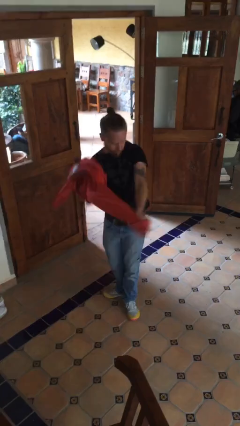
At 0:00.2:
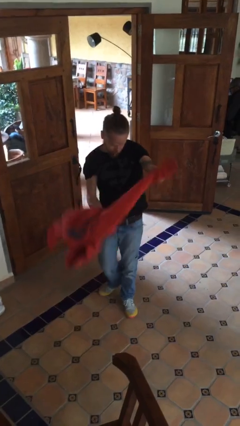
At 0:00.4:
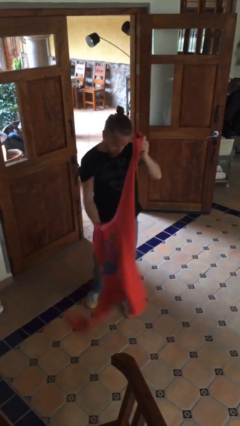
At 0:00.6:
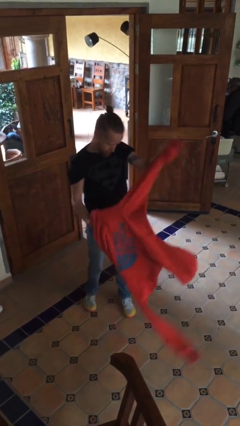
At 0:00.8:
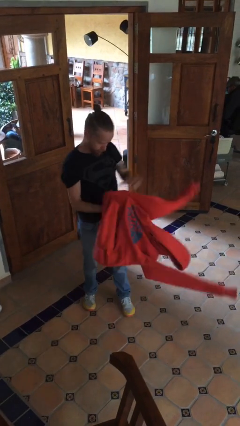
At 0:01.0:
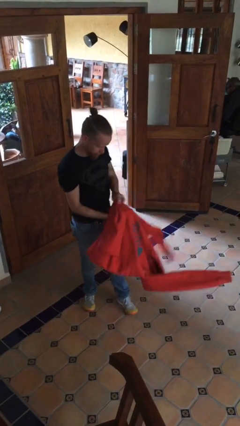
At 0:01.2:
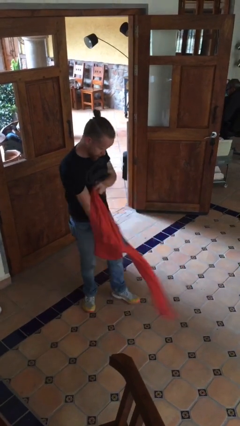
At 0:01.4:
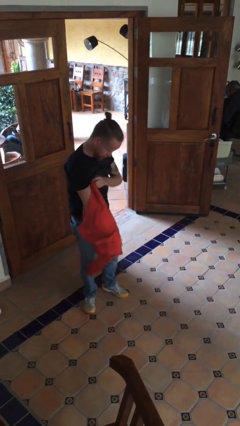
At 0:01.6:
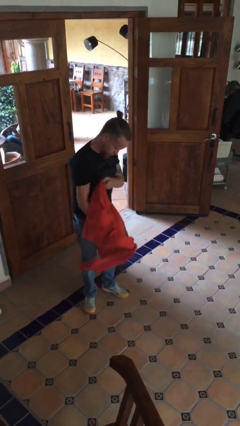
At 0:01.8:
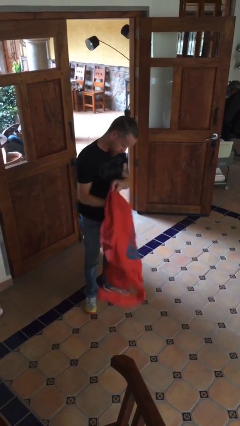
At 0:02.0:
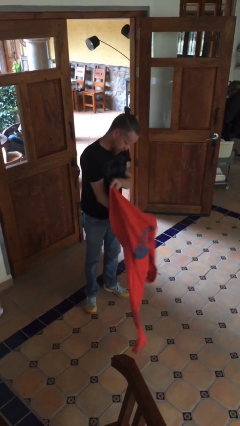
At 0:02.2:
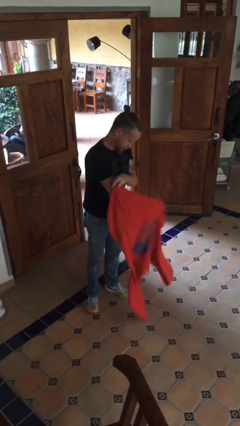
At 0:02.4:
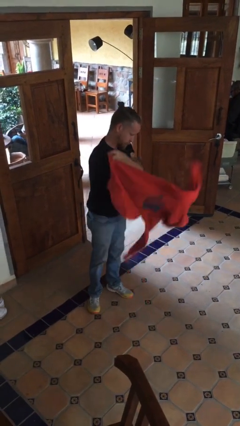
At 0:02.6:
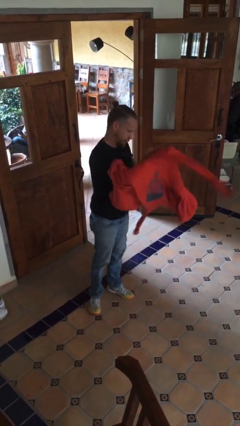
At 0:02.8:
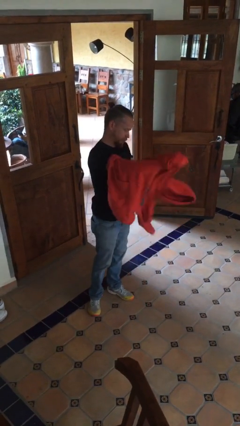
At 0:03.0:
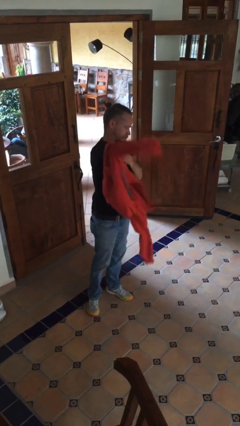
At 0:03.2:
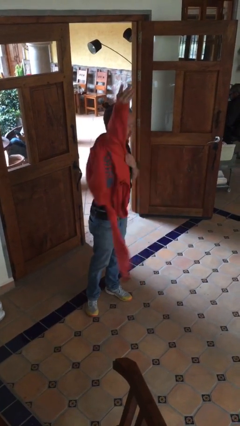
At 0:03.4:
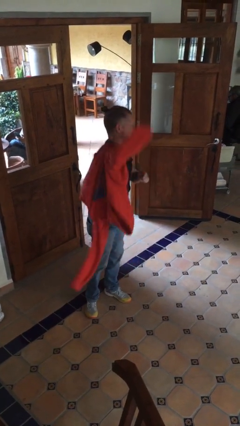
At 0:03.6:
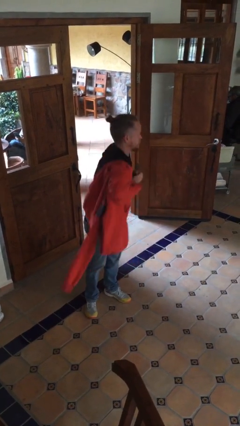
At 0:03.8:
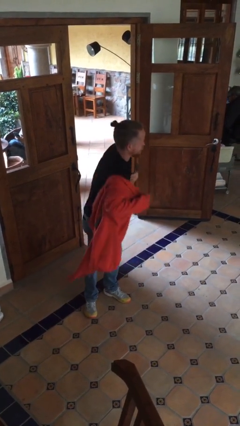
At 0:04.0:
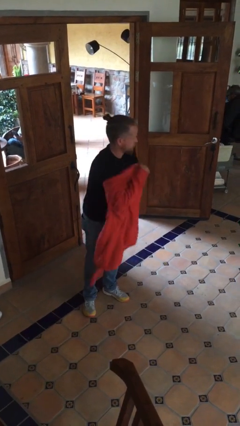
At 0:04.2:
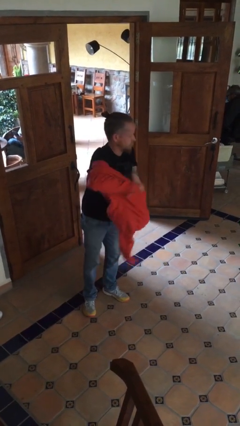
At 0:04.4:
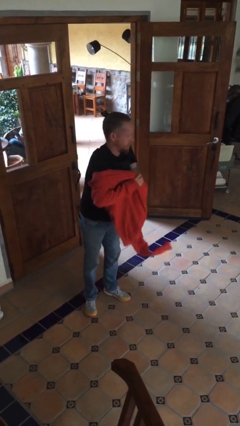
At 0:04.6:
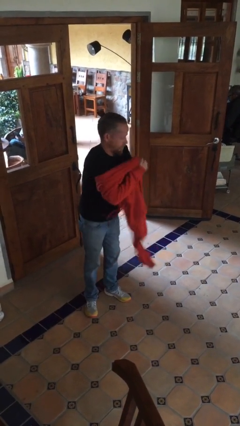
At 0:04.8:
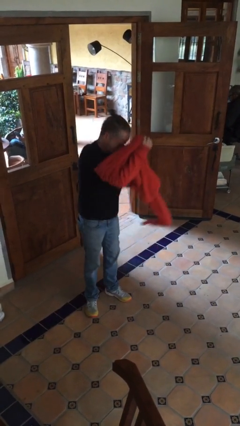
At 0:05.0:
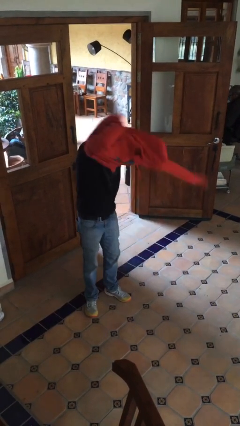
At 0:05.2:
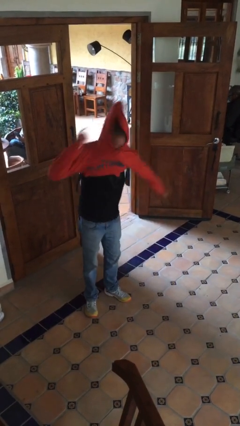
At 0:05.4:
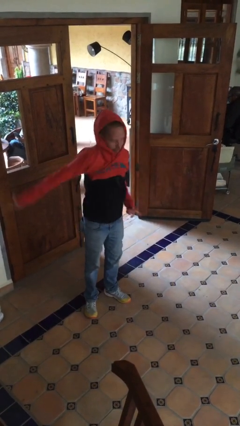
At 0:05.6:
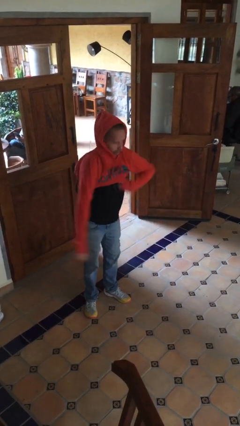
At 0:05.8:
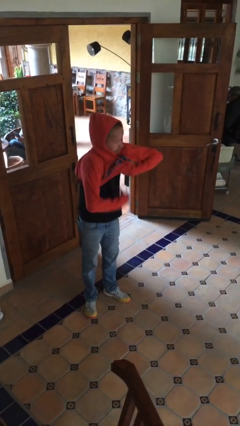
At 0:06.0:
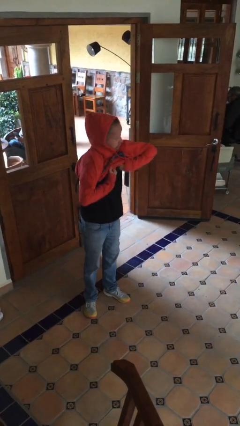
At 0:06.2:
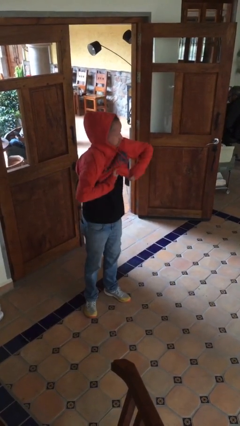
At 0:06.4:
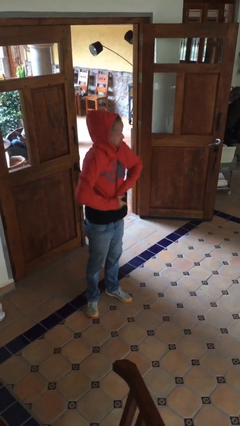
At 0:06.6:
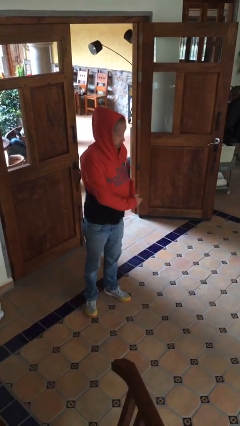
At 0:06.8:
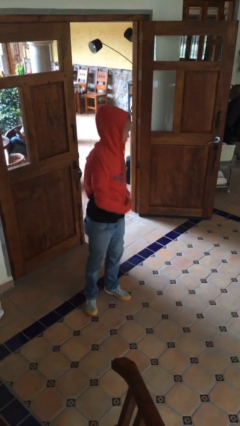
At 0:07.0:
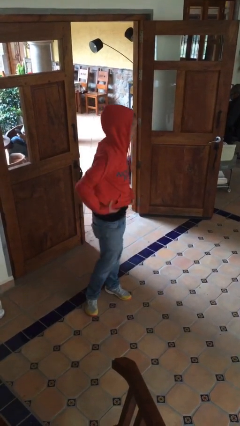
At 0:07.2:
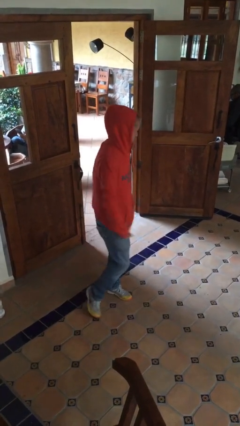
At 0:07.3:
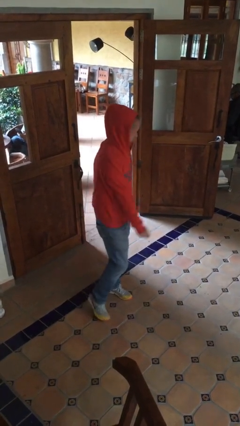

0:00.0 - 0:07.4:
person puts on hoodie

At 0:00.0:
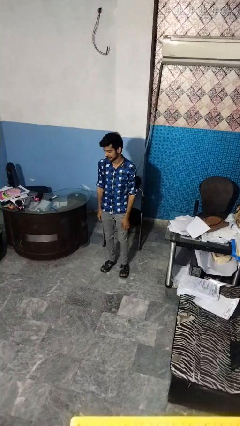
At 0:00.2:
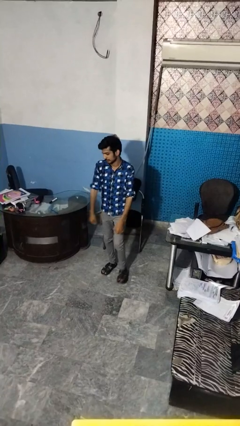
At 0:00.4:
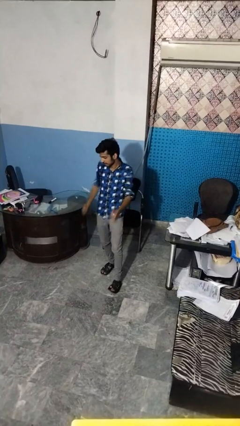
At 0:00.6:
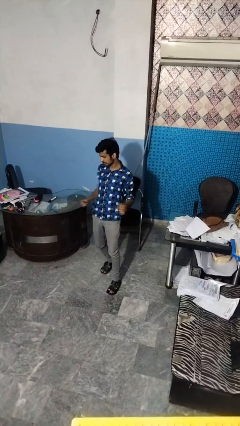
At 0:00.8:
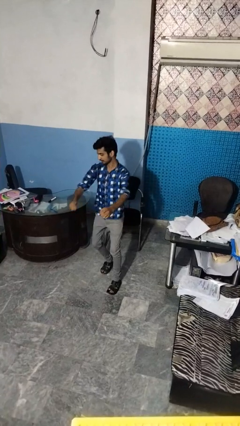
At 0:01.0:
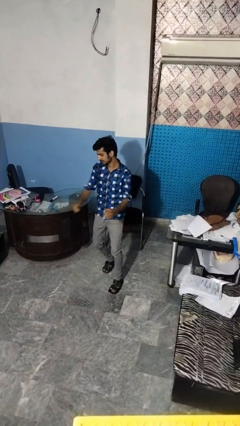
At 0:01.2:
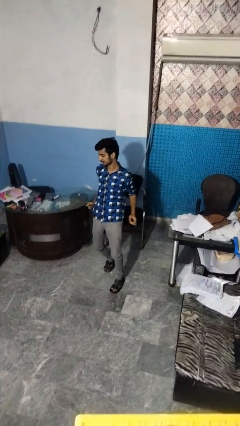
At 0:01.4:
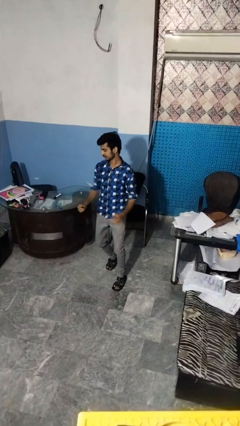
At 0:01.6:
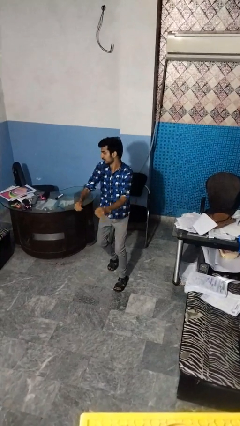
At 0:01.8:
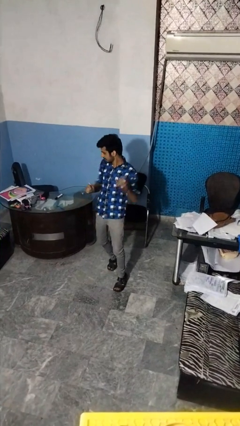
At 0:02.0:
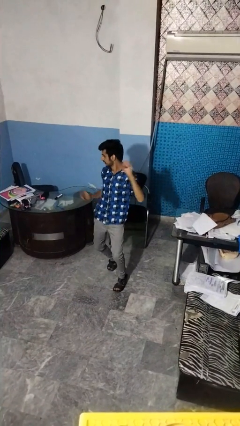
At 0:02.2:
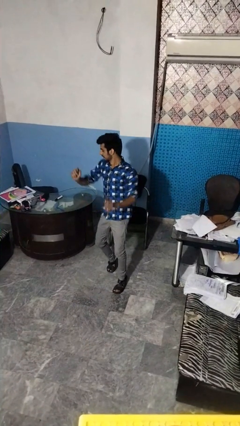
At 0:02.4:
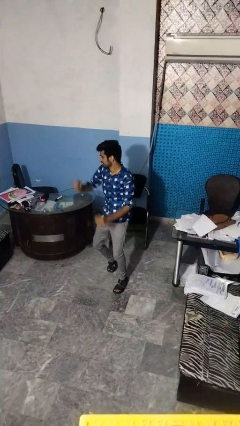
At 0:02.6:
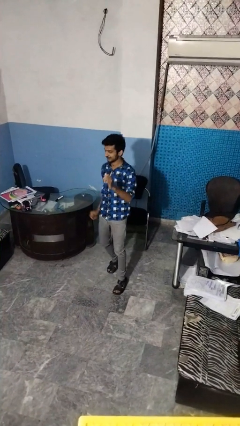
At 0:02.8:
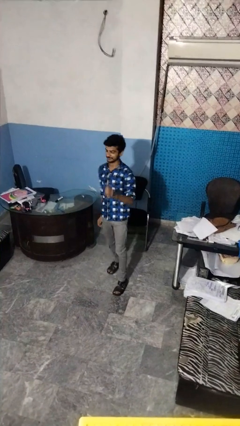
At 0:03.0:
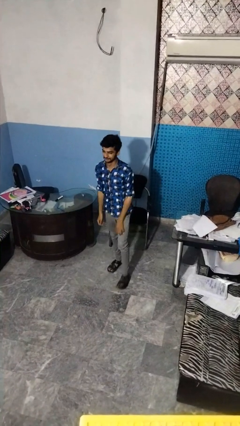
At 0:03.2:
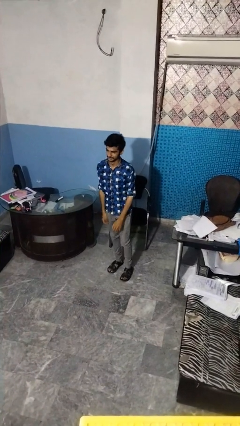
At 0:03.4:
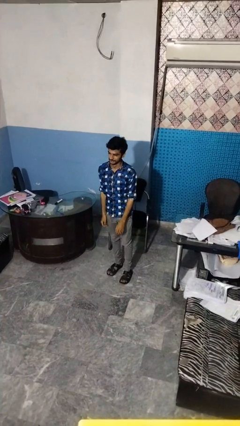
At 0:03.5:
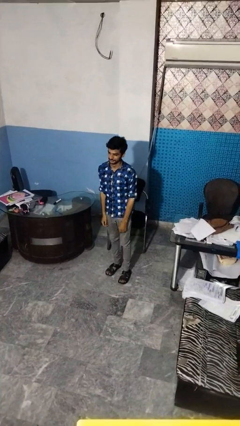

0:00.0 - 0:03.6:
person dances in place

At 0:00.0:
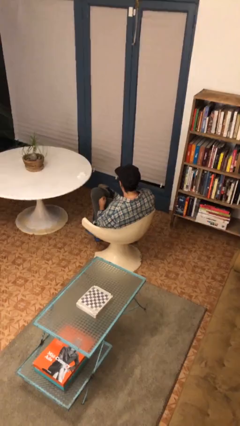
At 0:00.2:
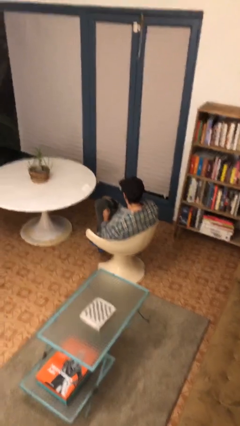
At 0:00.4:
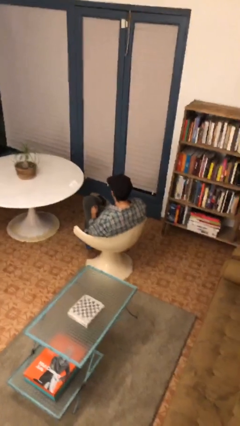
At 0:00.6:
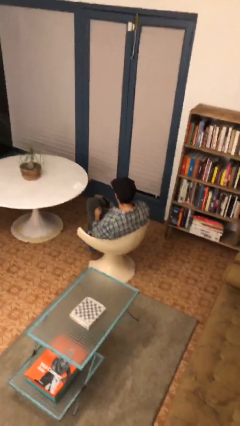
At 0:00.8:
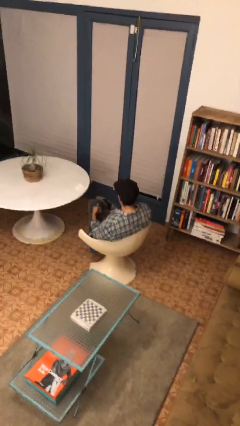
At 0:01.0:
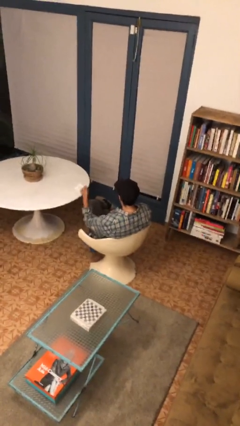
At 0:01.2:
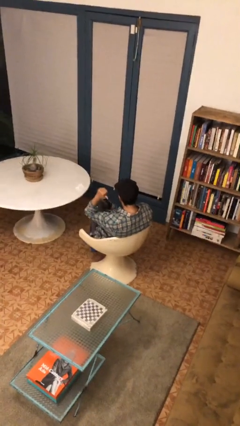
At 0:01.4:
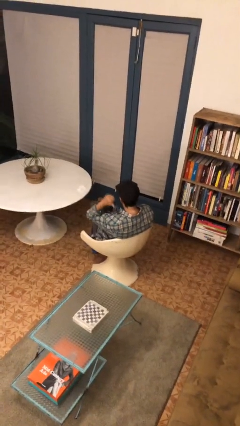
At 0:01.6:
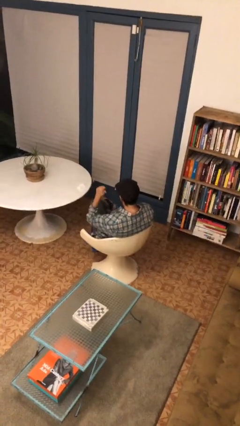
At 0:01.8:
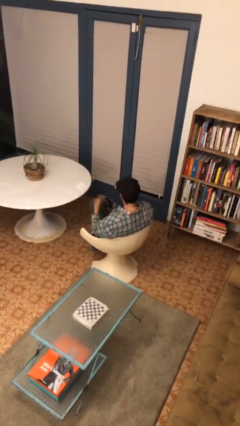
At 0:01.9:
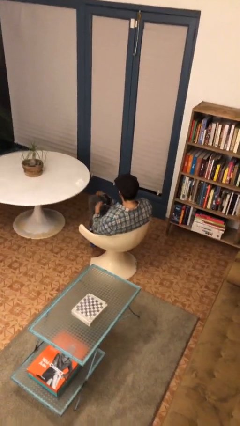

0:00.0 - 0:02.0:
person gestures behind me

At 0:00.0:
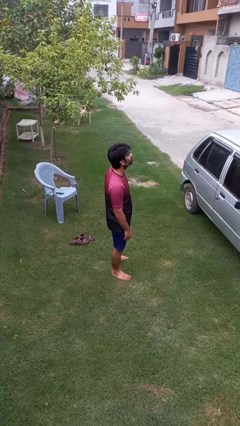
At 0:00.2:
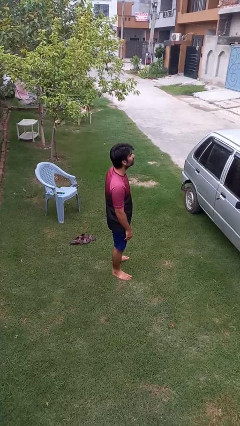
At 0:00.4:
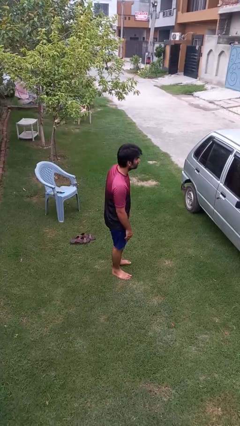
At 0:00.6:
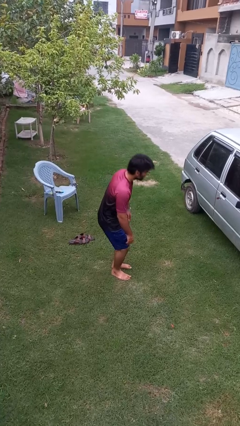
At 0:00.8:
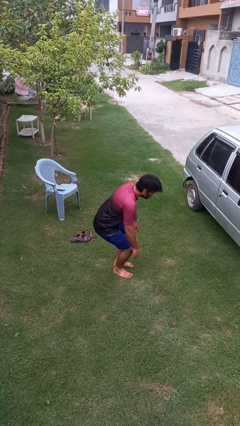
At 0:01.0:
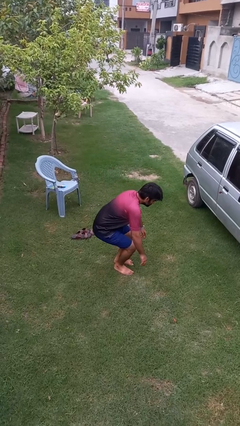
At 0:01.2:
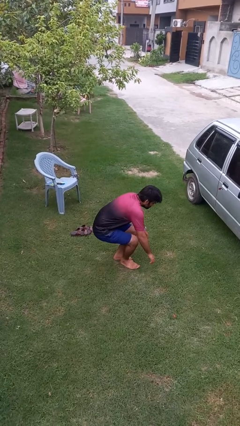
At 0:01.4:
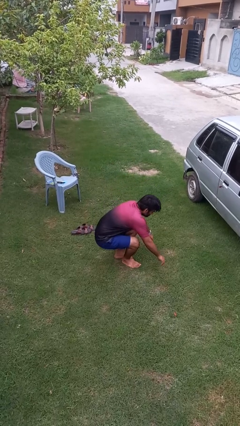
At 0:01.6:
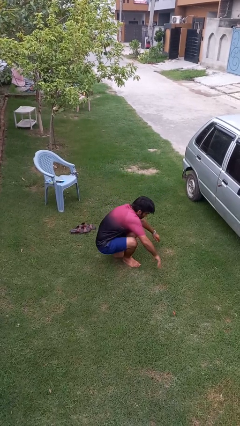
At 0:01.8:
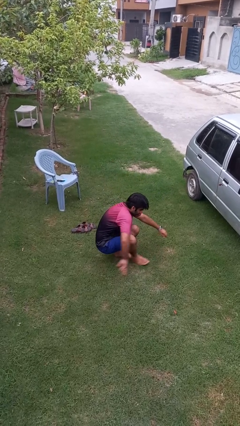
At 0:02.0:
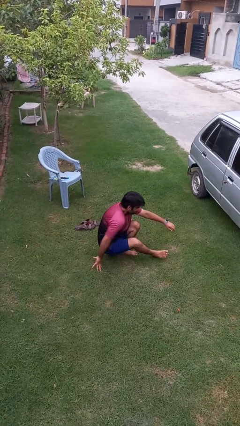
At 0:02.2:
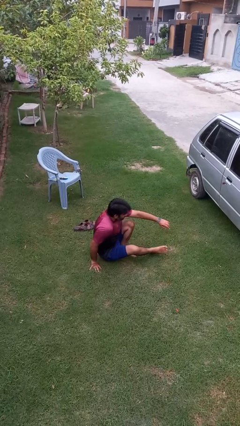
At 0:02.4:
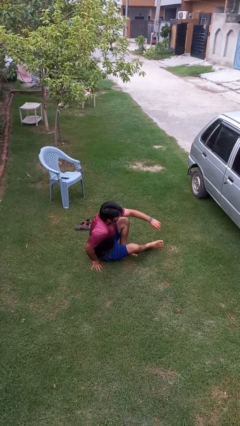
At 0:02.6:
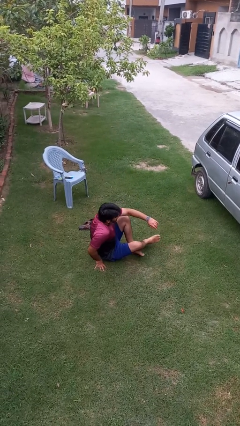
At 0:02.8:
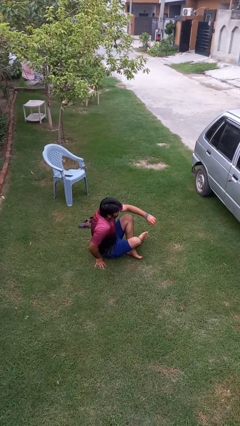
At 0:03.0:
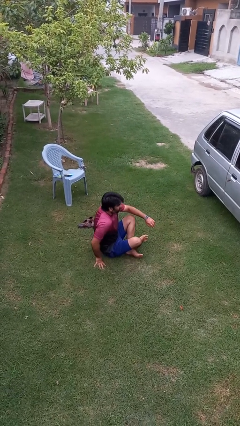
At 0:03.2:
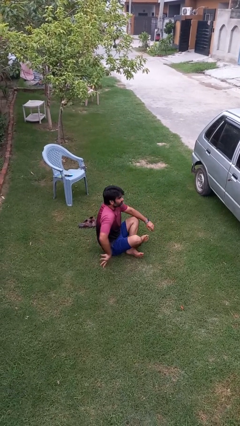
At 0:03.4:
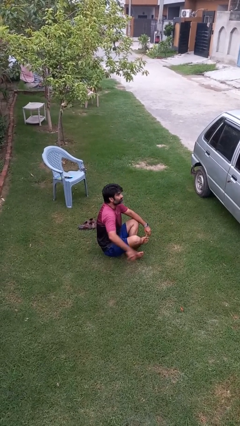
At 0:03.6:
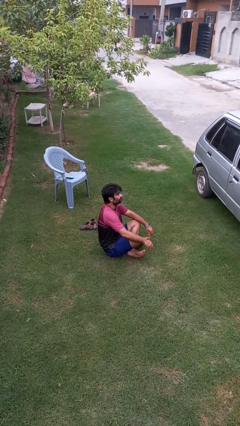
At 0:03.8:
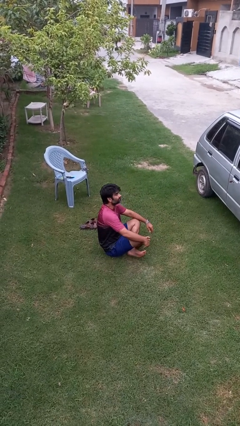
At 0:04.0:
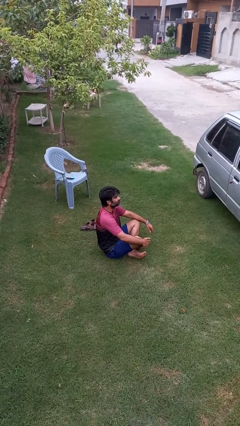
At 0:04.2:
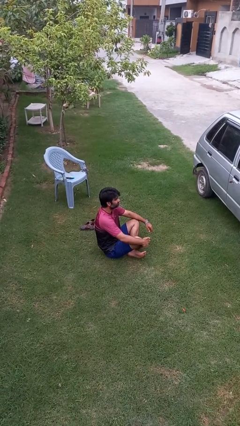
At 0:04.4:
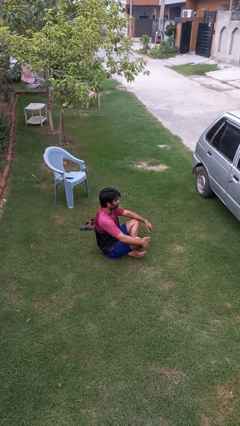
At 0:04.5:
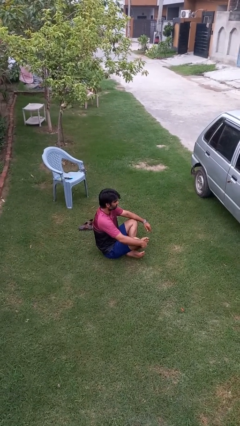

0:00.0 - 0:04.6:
person sits crisscross
